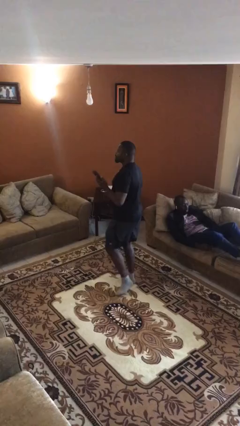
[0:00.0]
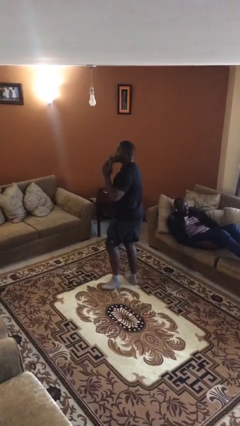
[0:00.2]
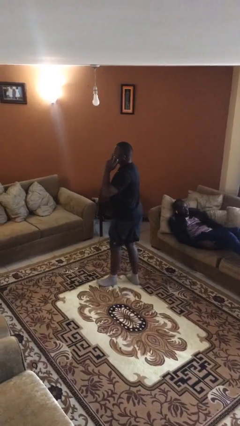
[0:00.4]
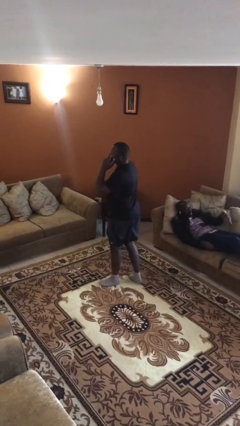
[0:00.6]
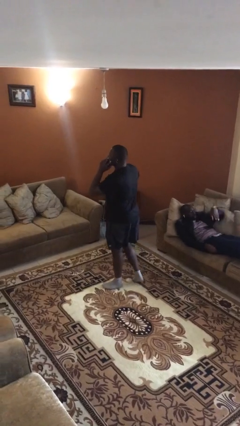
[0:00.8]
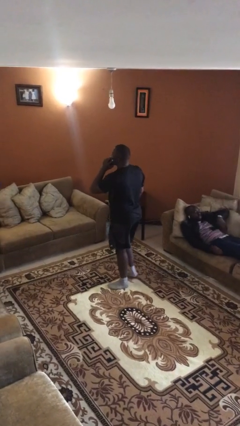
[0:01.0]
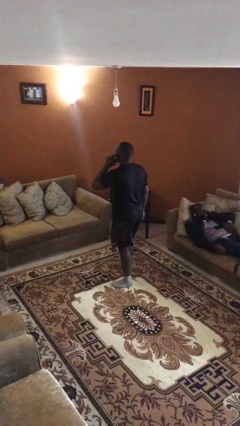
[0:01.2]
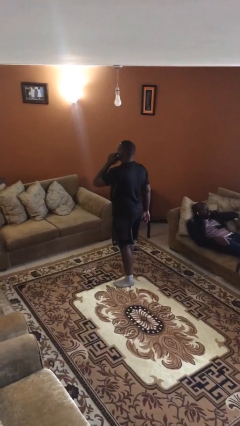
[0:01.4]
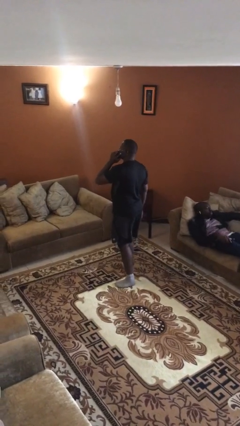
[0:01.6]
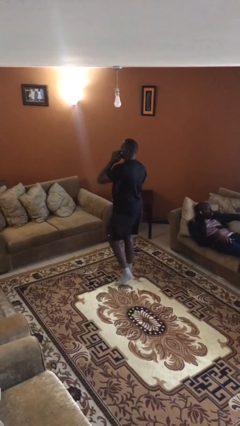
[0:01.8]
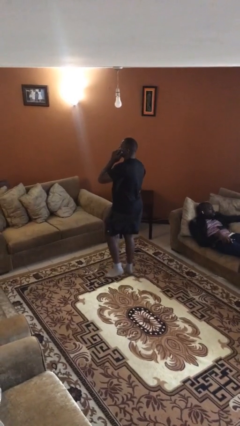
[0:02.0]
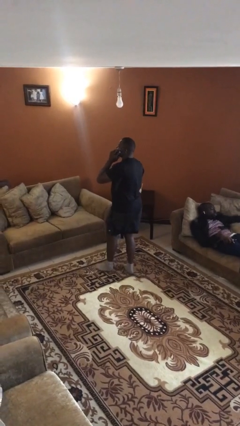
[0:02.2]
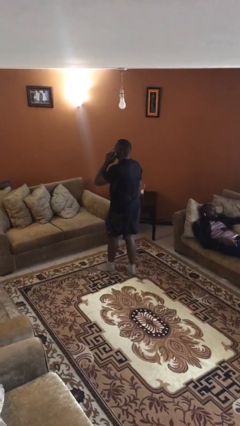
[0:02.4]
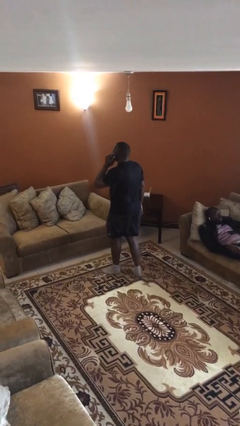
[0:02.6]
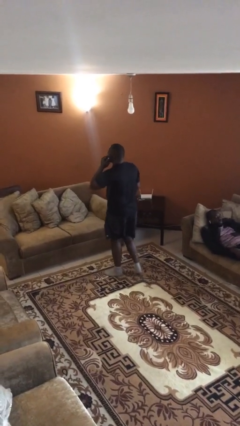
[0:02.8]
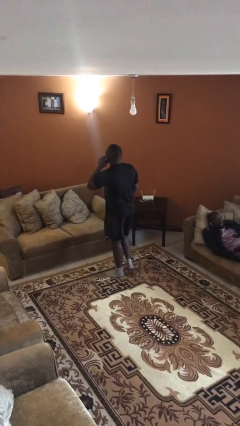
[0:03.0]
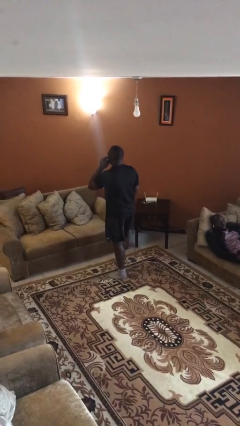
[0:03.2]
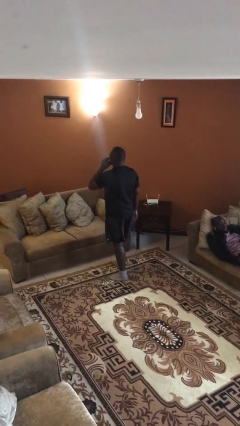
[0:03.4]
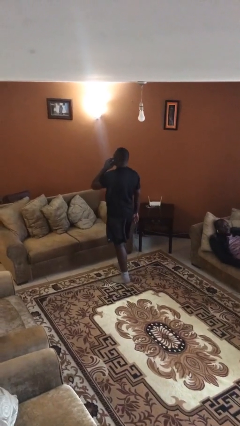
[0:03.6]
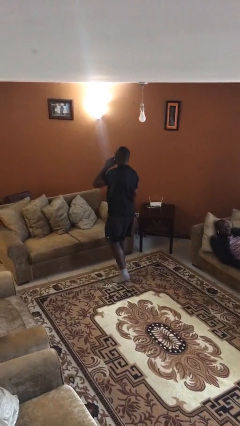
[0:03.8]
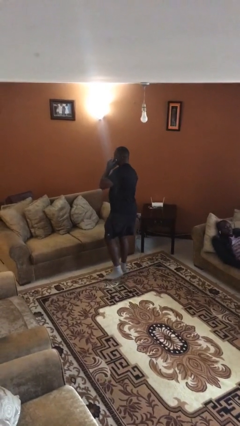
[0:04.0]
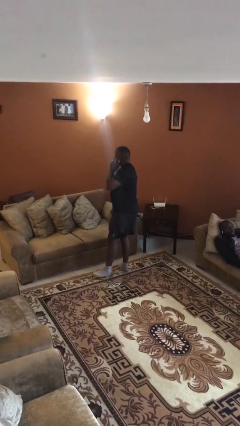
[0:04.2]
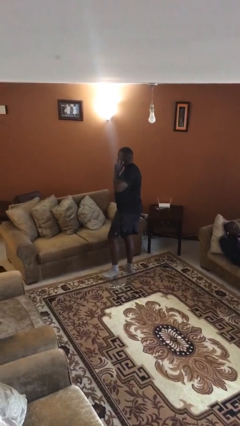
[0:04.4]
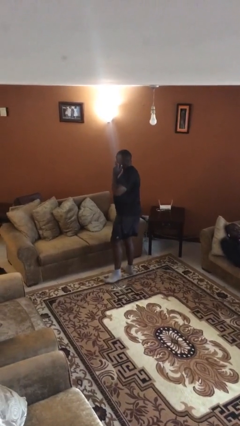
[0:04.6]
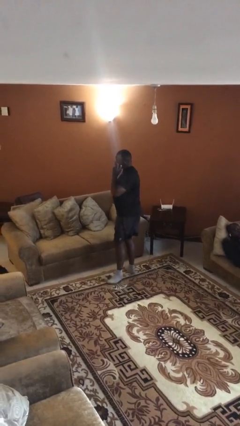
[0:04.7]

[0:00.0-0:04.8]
person talks on phone

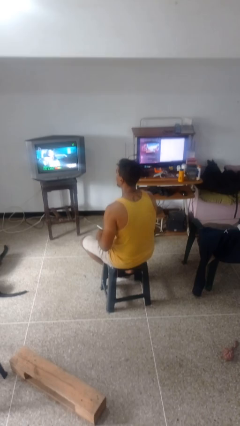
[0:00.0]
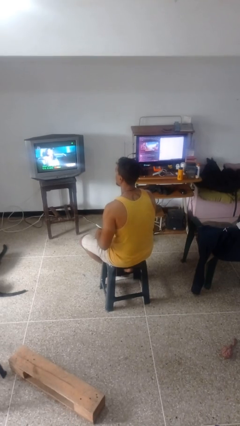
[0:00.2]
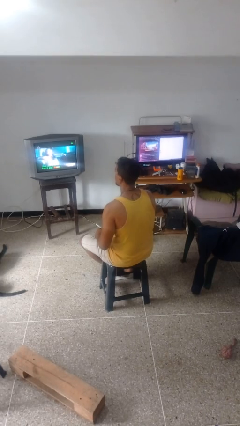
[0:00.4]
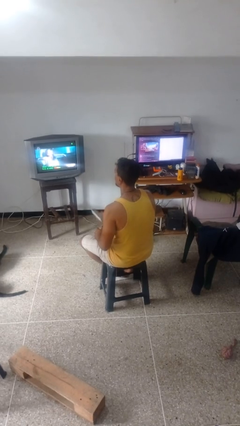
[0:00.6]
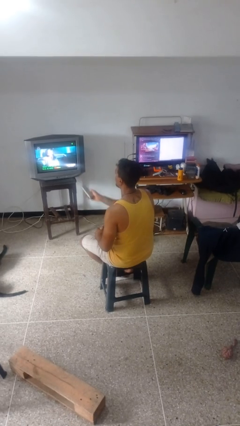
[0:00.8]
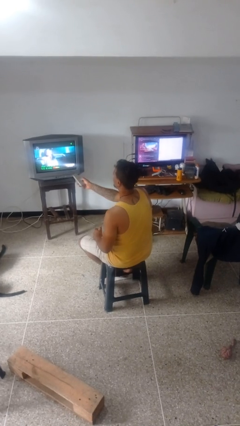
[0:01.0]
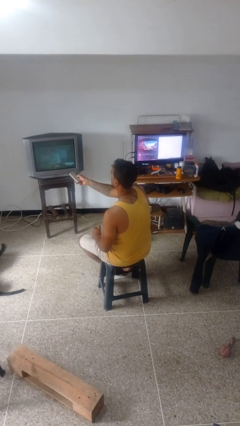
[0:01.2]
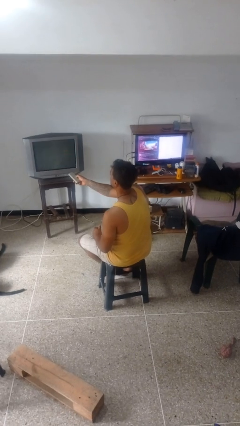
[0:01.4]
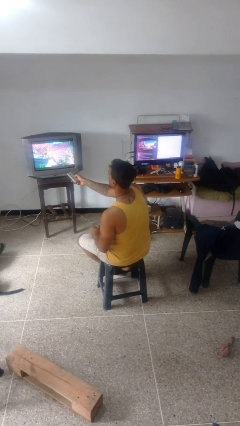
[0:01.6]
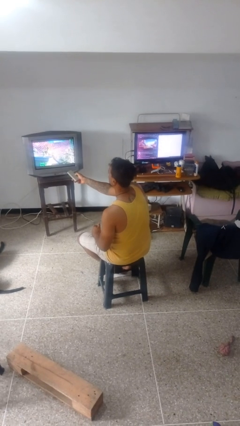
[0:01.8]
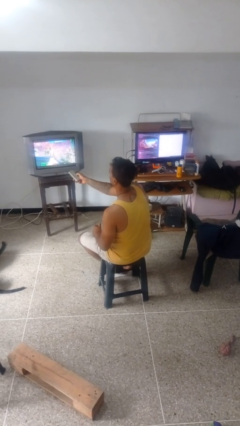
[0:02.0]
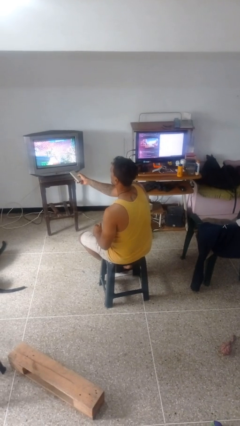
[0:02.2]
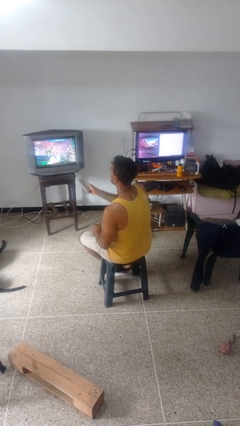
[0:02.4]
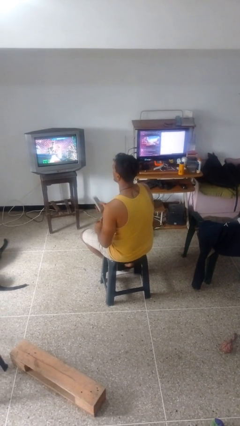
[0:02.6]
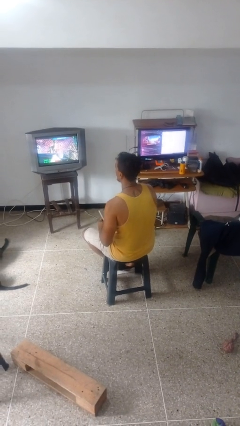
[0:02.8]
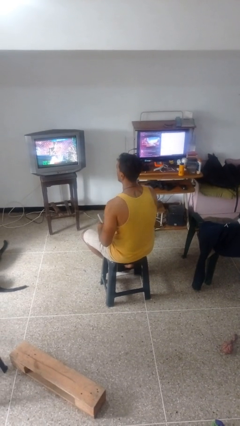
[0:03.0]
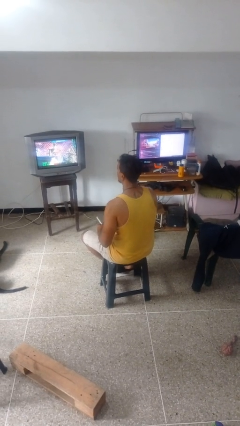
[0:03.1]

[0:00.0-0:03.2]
person uses television remote

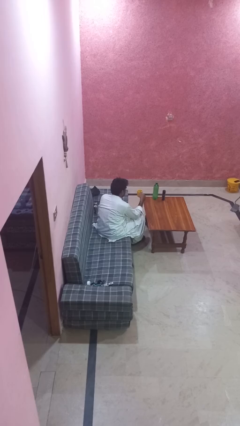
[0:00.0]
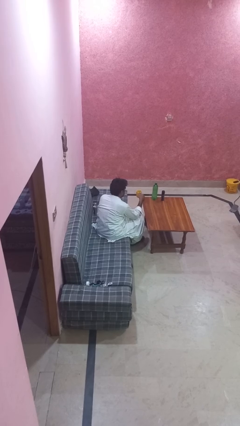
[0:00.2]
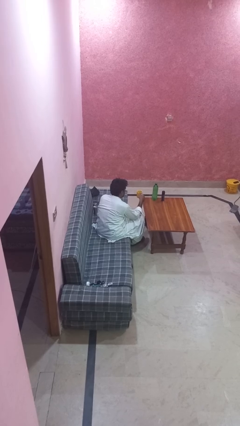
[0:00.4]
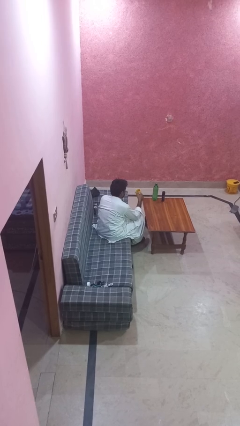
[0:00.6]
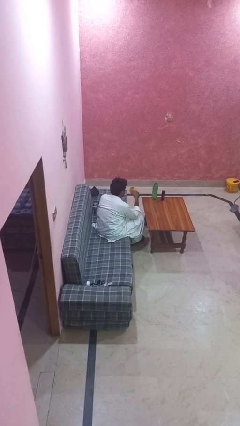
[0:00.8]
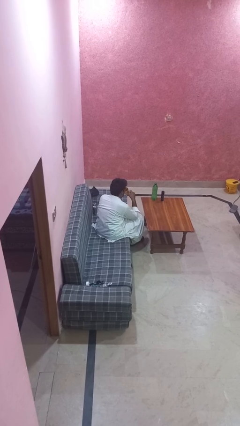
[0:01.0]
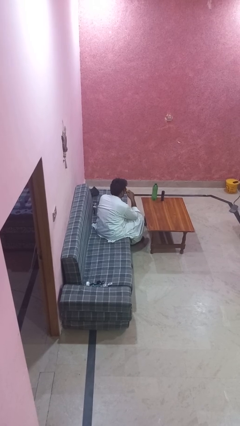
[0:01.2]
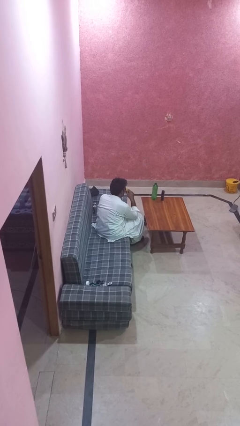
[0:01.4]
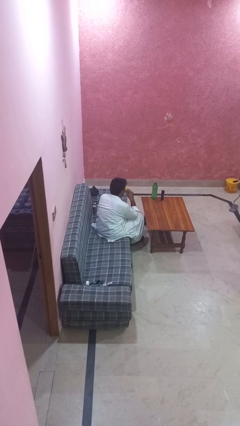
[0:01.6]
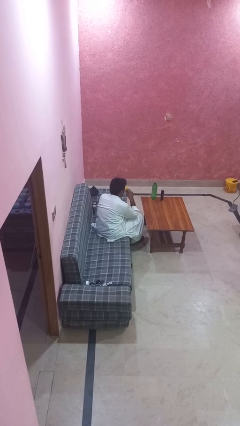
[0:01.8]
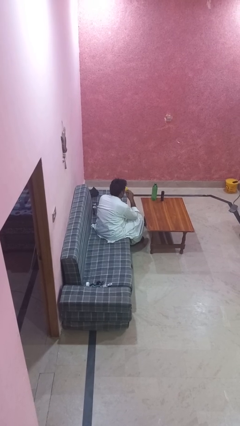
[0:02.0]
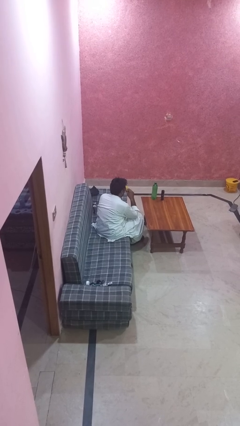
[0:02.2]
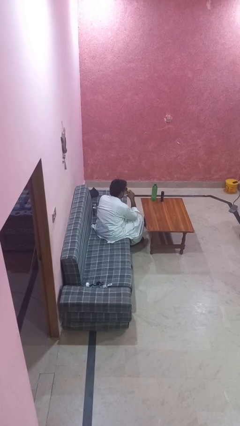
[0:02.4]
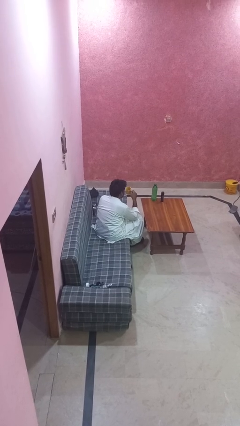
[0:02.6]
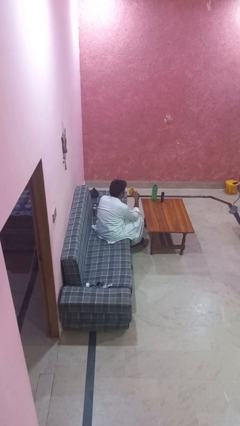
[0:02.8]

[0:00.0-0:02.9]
person drinks from mug

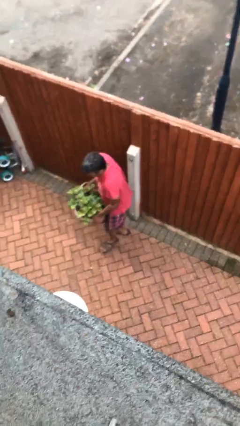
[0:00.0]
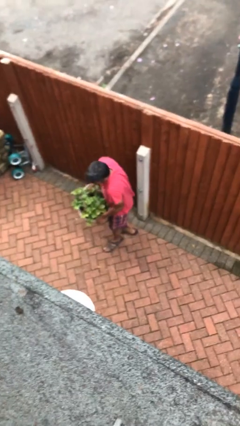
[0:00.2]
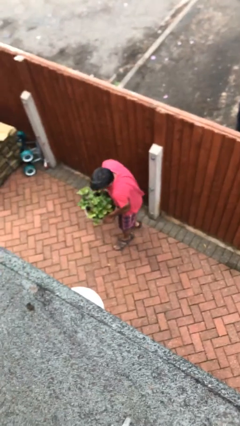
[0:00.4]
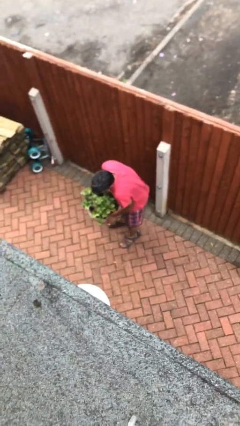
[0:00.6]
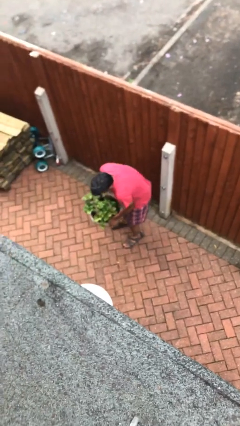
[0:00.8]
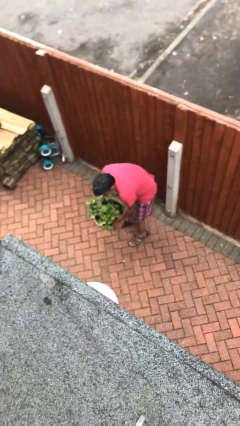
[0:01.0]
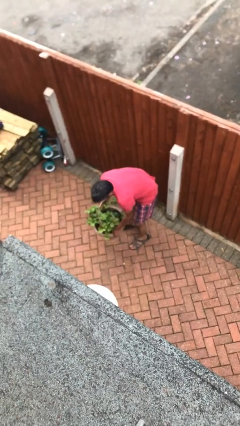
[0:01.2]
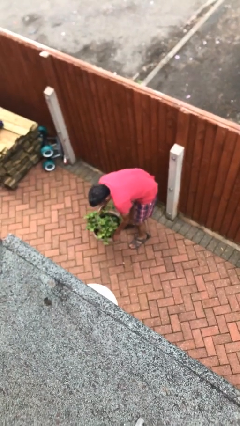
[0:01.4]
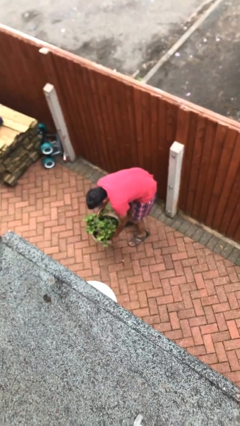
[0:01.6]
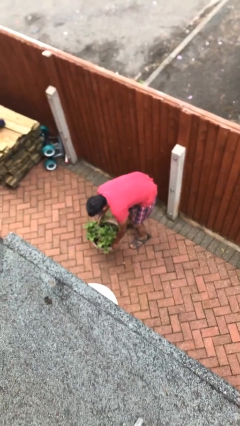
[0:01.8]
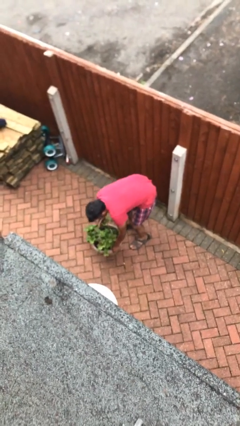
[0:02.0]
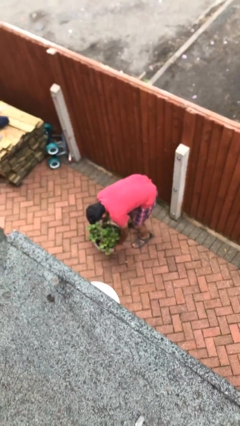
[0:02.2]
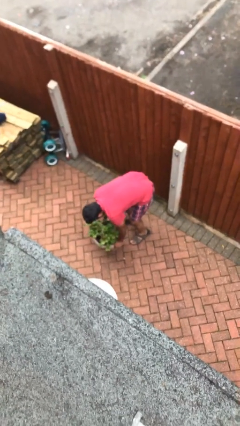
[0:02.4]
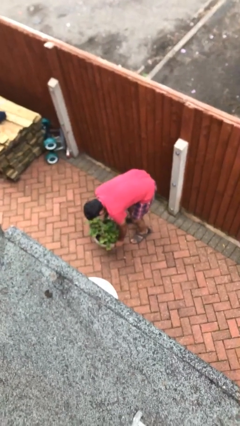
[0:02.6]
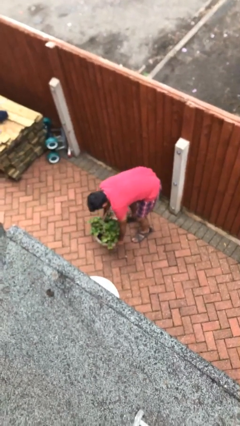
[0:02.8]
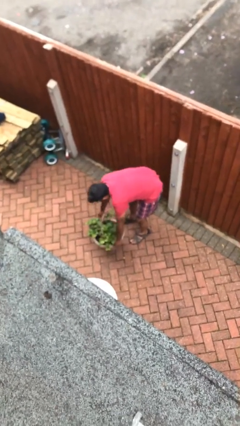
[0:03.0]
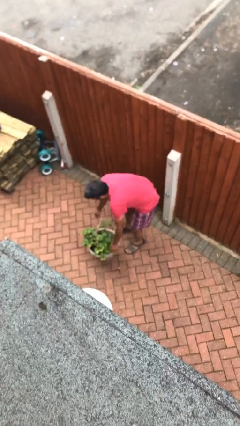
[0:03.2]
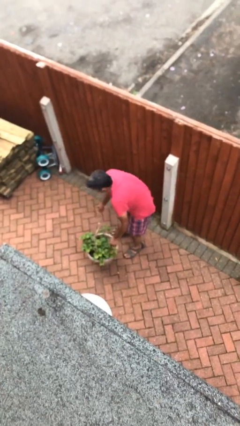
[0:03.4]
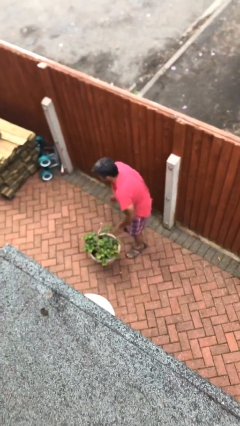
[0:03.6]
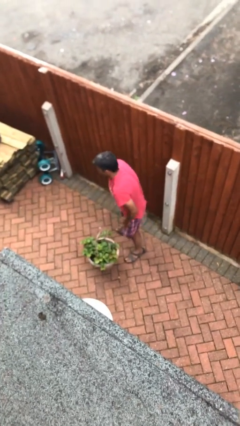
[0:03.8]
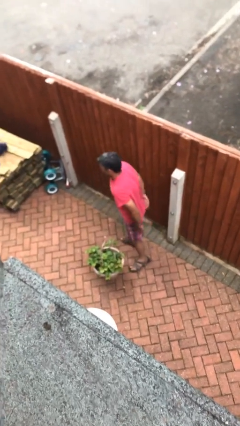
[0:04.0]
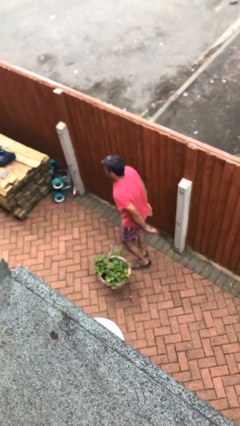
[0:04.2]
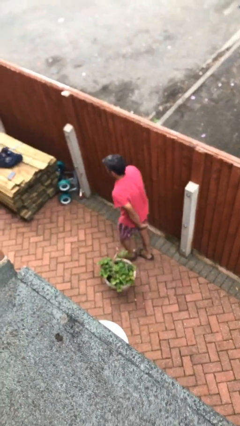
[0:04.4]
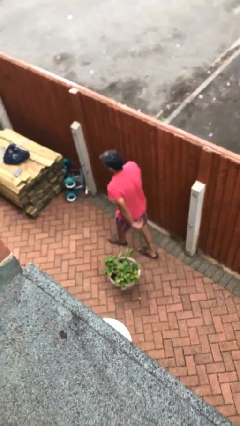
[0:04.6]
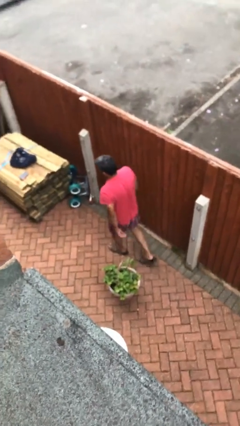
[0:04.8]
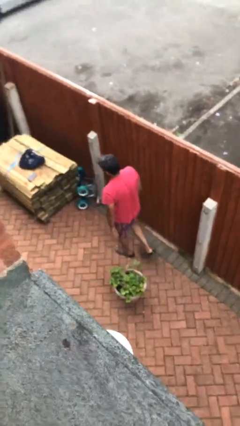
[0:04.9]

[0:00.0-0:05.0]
person puts down object on floor

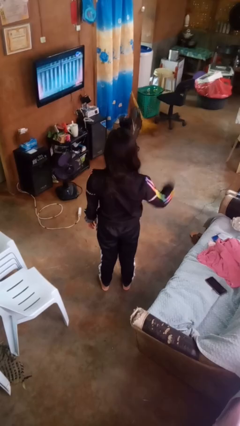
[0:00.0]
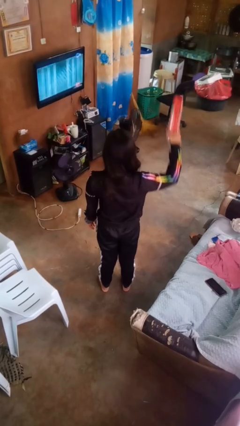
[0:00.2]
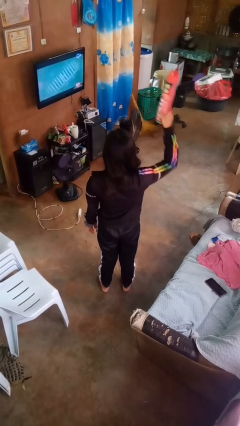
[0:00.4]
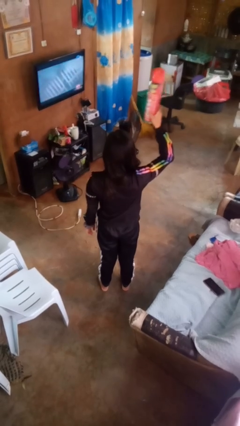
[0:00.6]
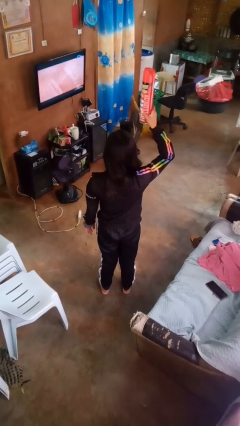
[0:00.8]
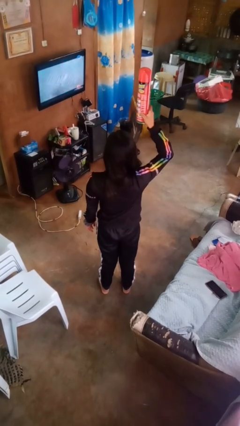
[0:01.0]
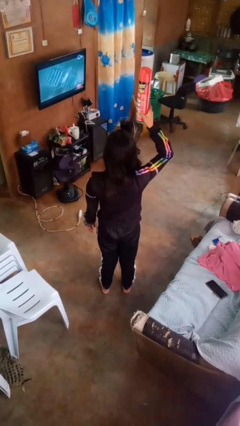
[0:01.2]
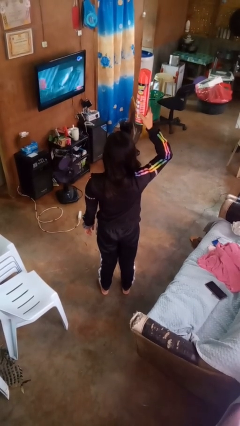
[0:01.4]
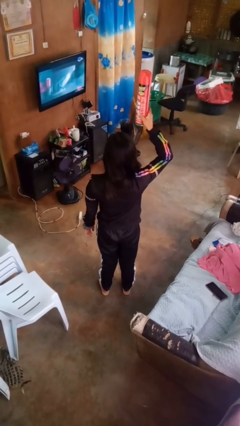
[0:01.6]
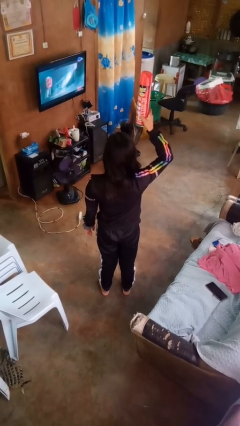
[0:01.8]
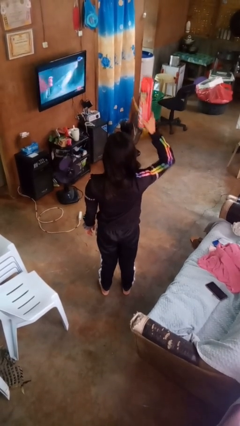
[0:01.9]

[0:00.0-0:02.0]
person holds object above head
